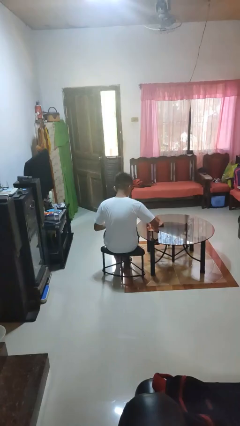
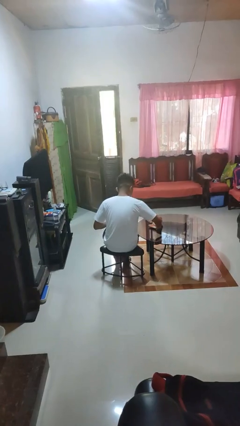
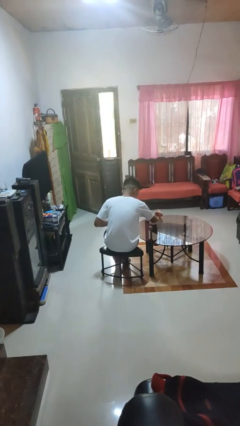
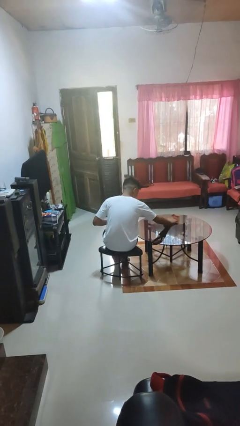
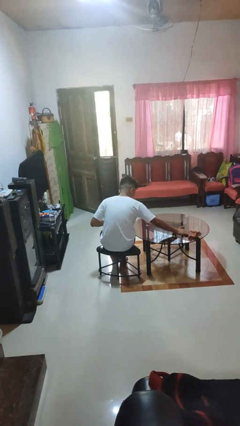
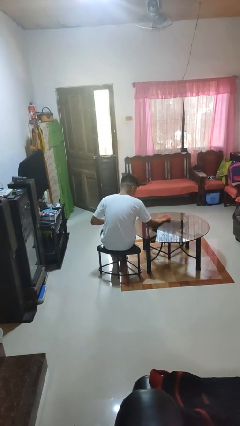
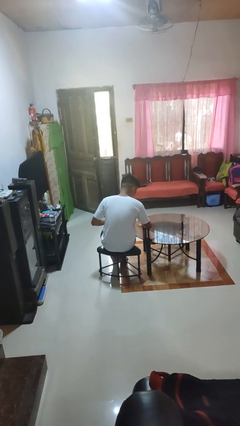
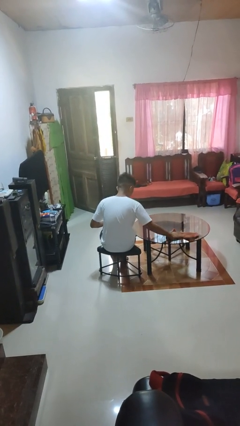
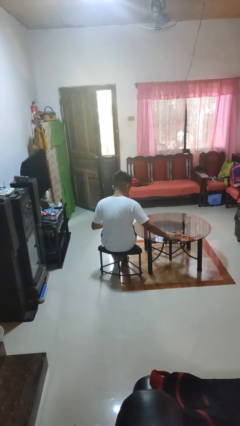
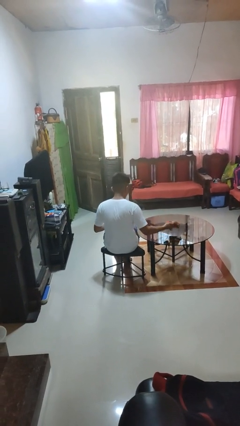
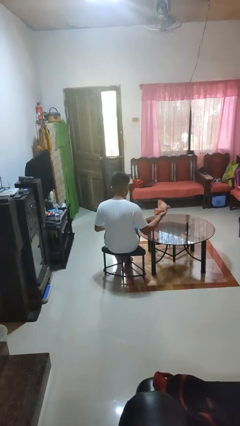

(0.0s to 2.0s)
person cleans table with rag

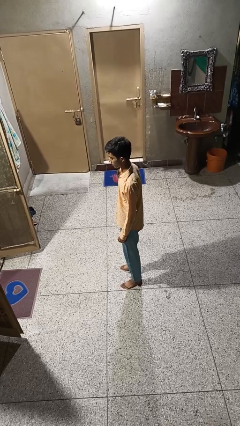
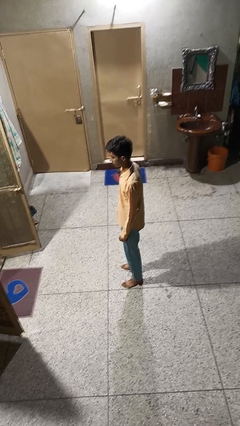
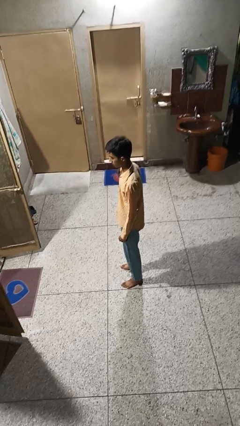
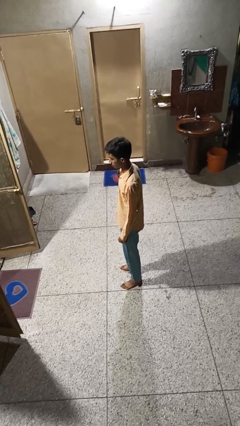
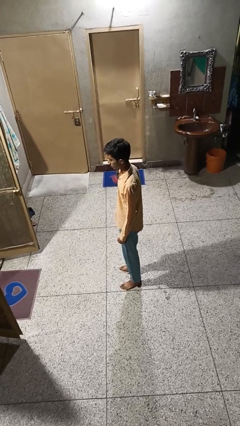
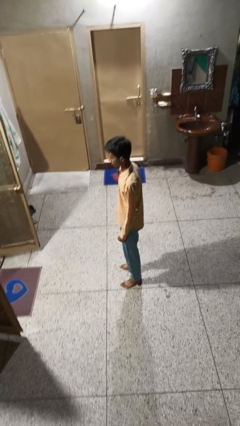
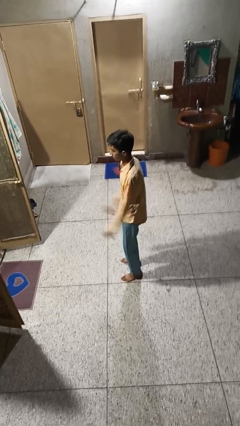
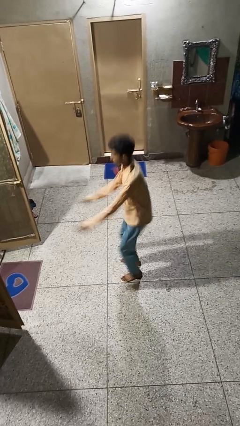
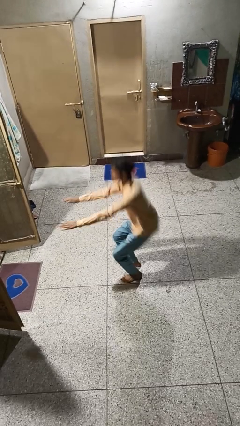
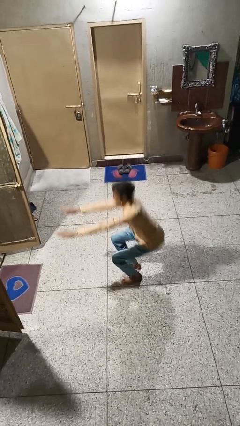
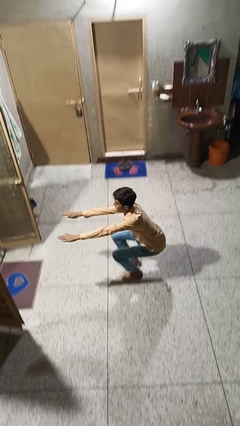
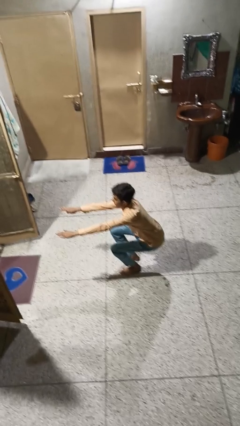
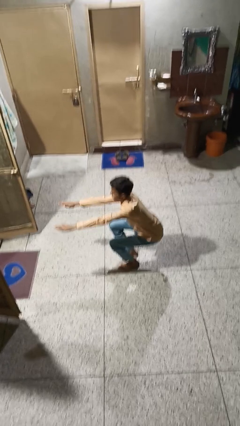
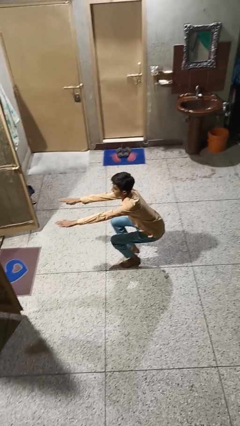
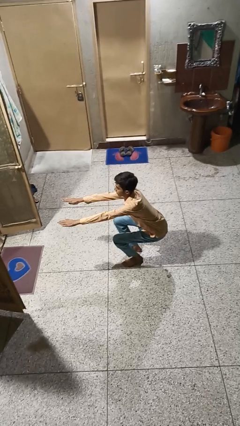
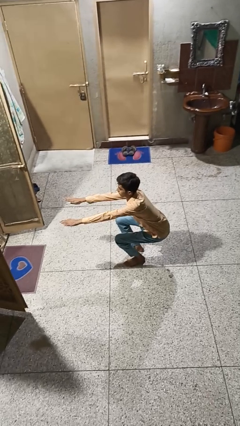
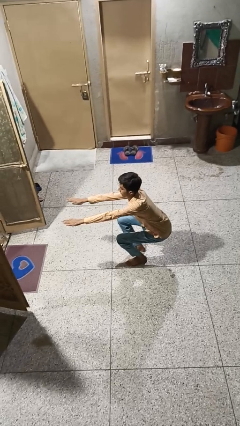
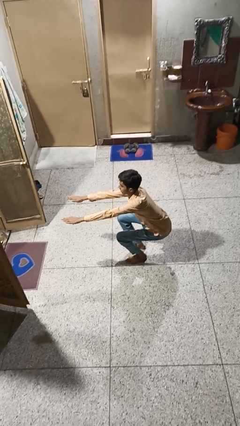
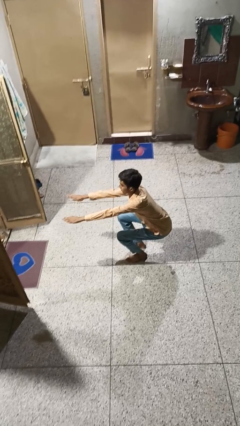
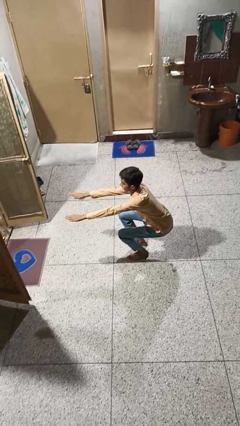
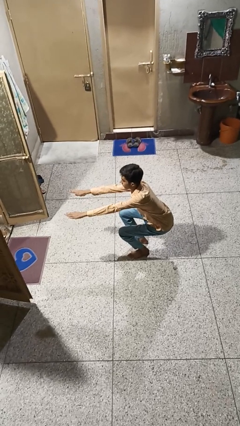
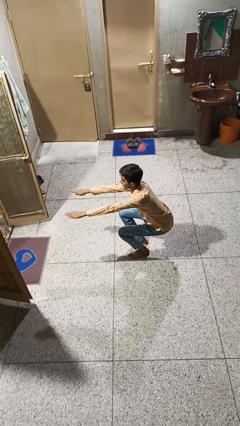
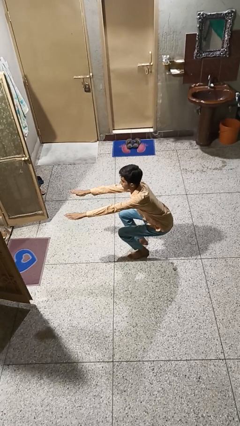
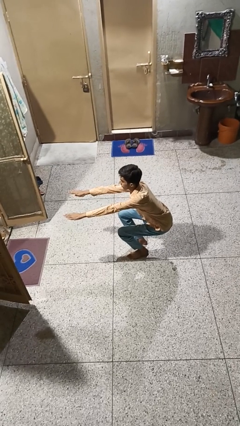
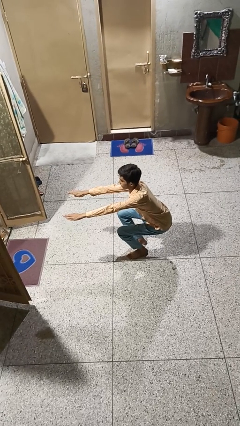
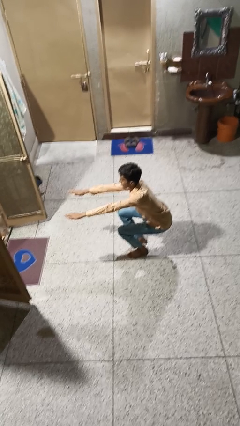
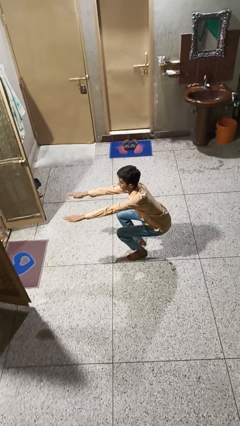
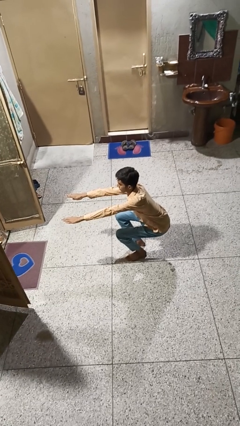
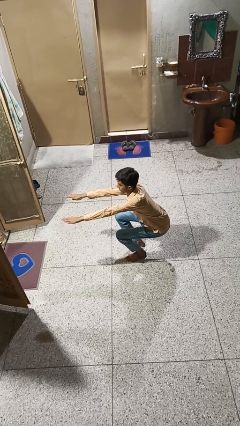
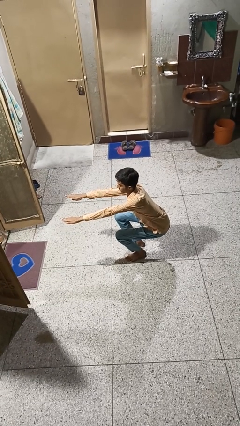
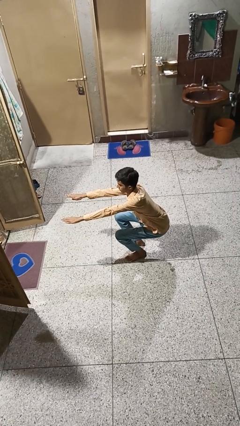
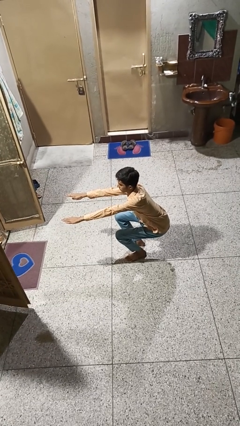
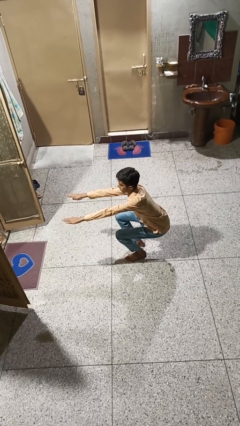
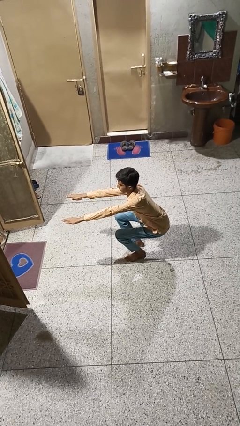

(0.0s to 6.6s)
person squats

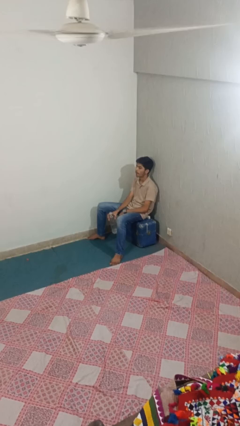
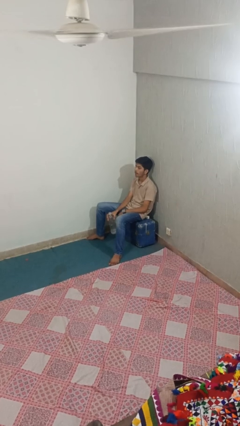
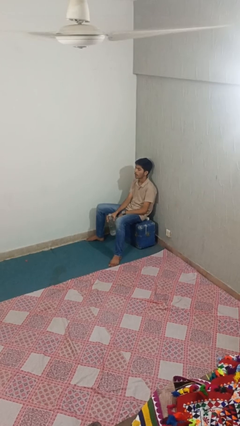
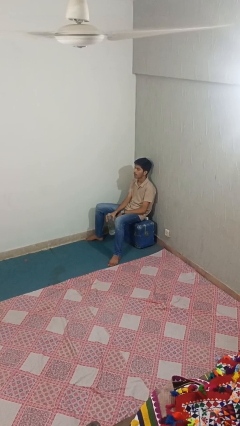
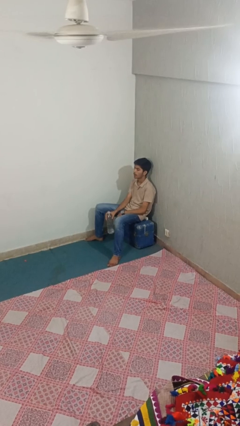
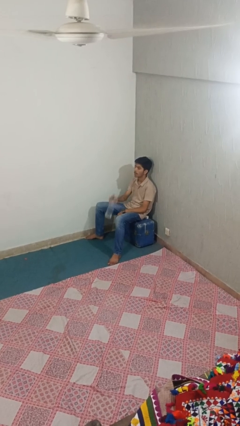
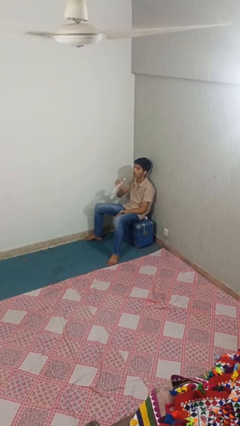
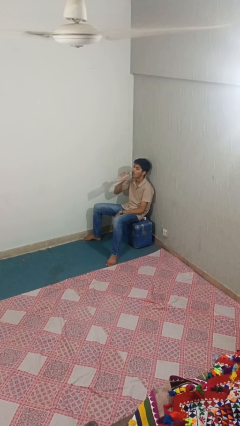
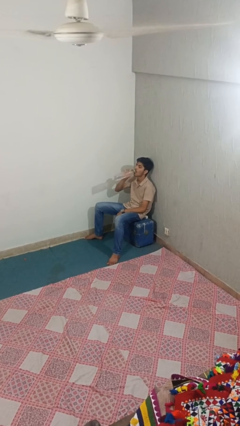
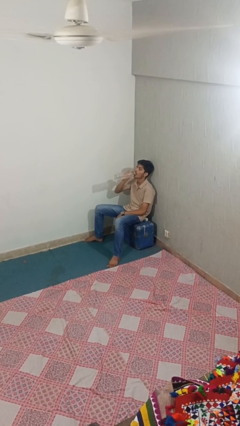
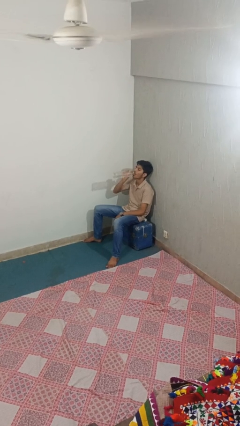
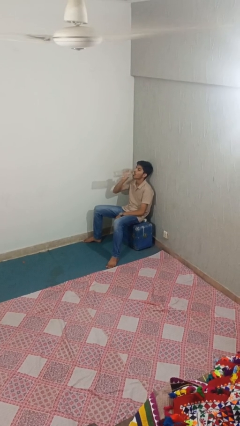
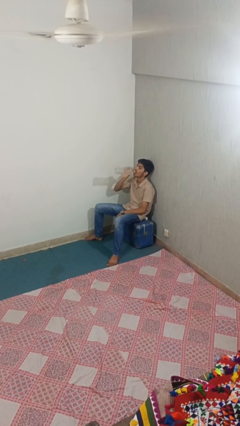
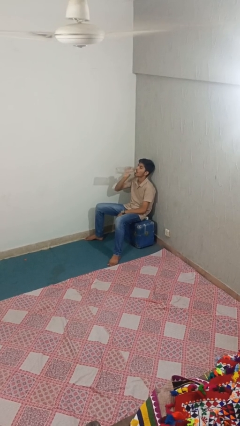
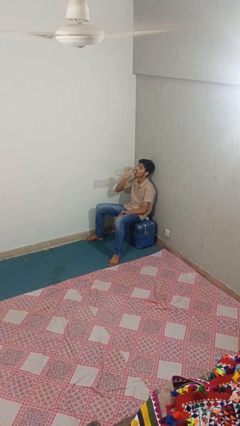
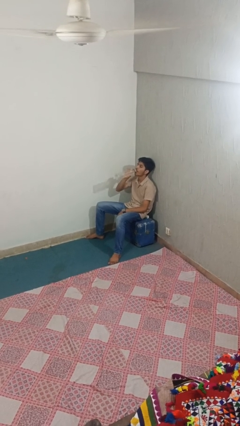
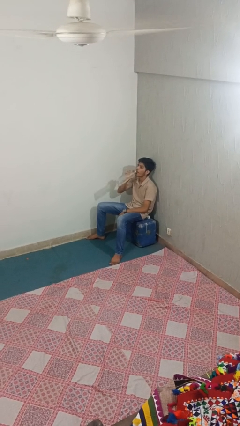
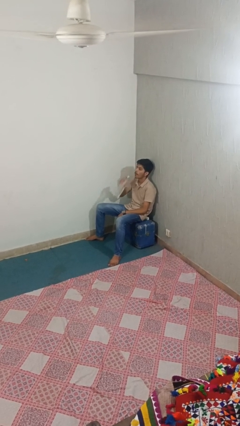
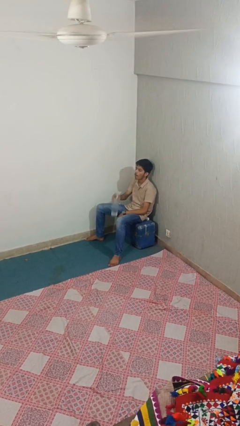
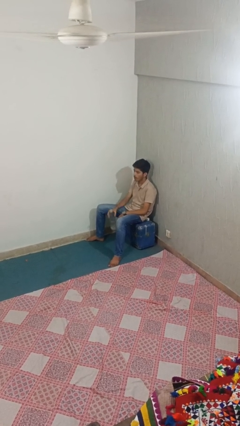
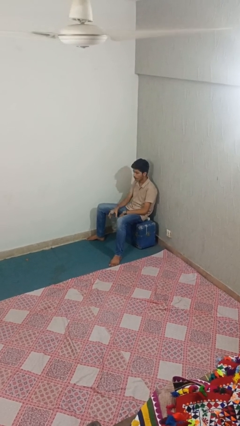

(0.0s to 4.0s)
person drinks from bottle

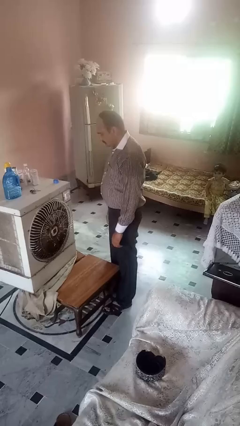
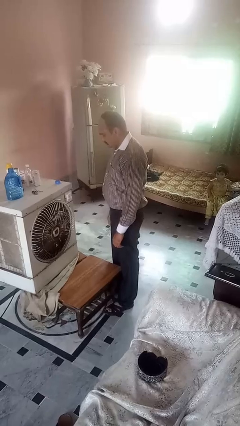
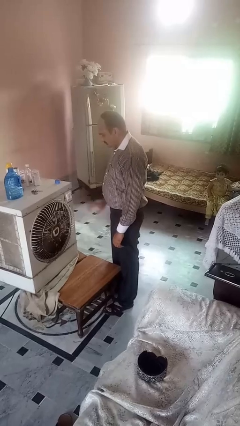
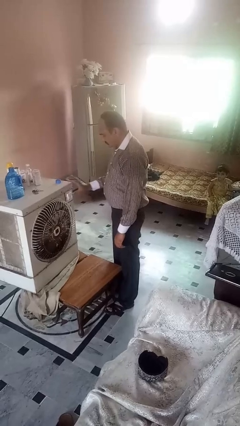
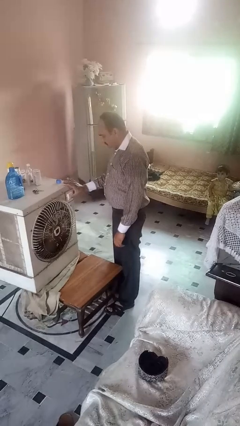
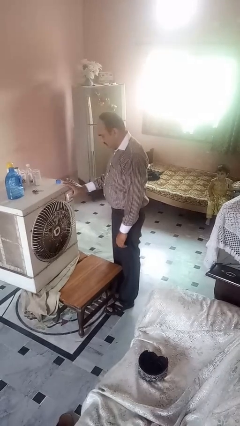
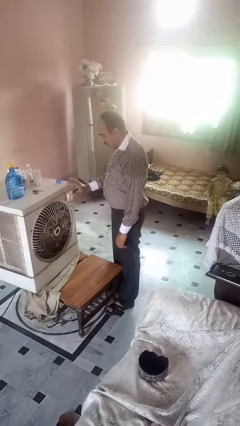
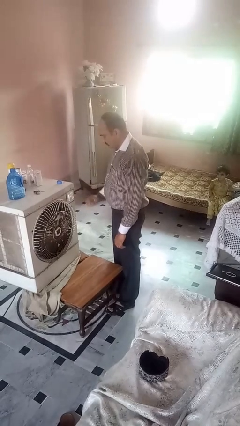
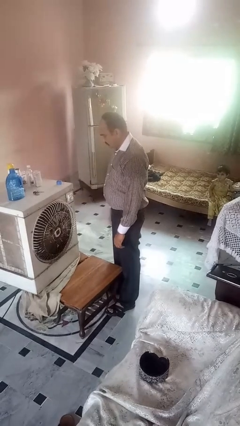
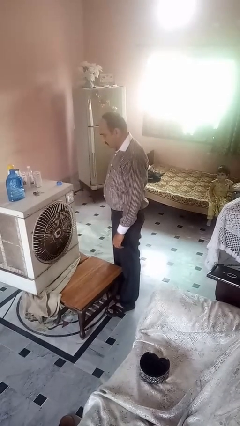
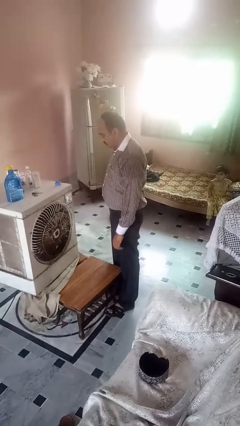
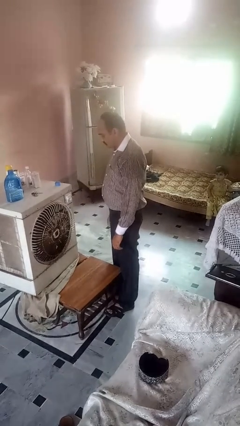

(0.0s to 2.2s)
person turns on fan

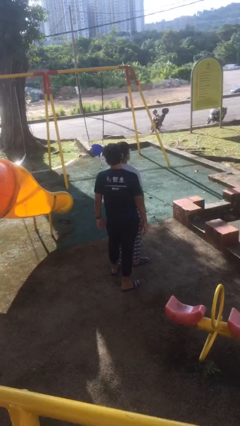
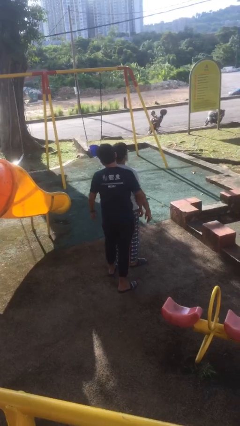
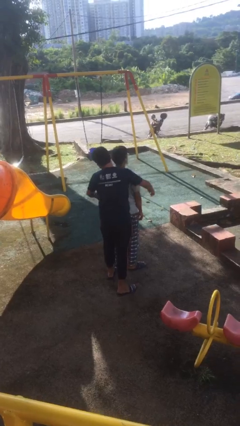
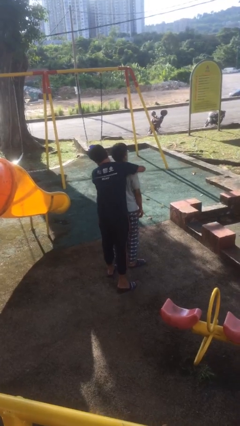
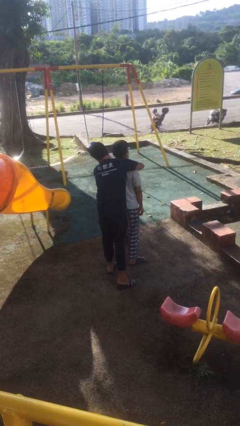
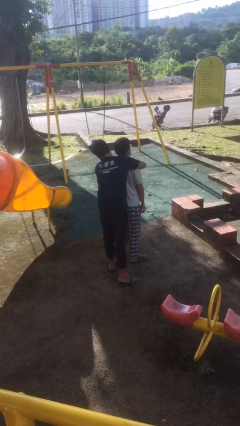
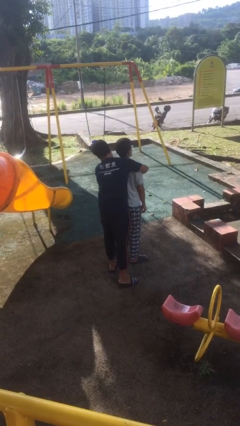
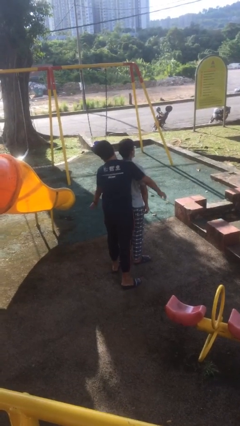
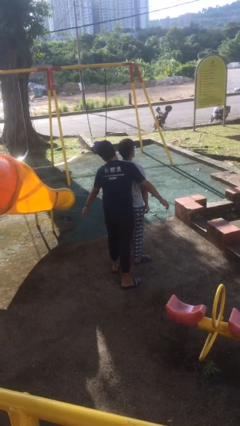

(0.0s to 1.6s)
person hugs person from behind

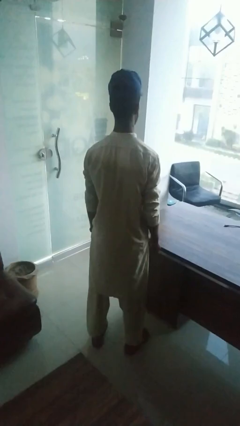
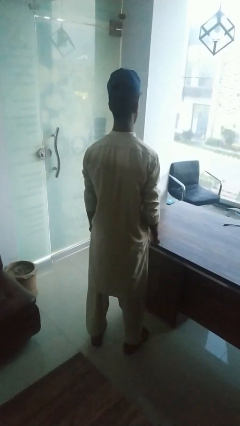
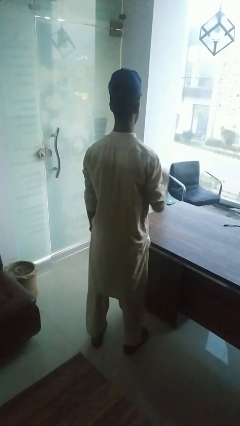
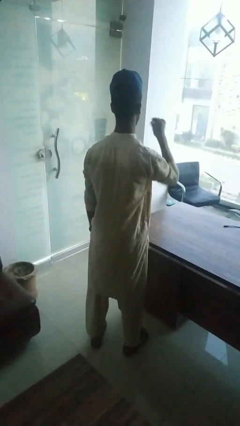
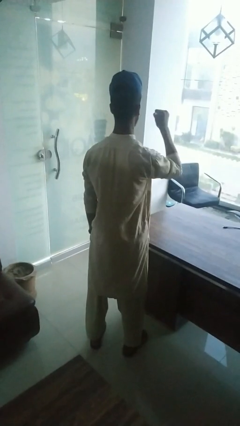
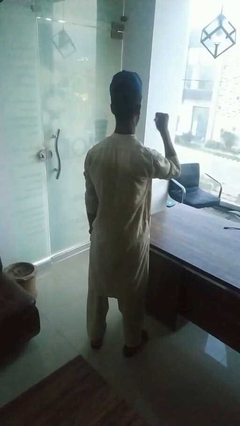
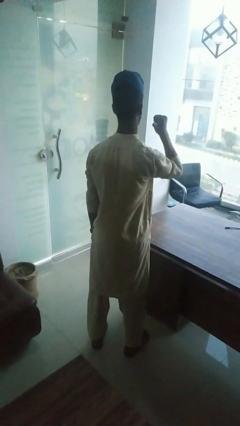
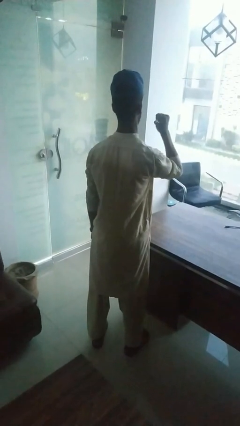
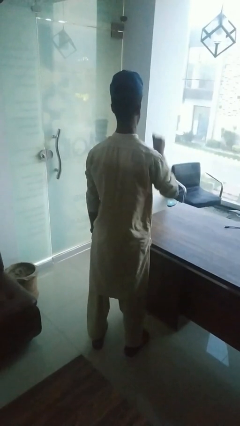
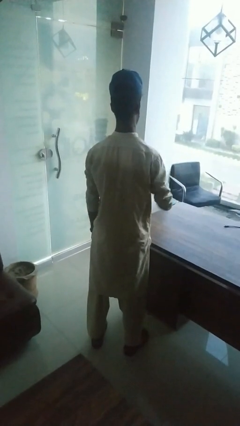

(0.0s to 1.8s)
person gestures behind me
